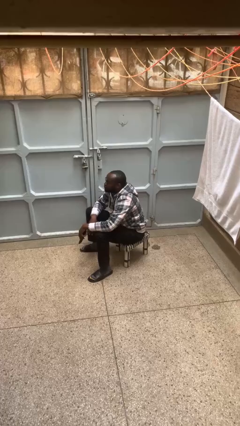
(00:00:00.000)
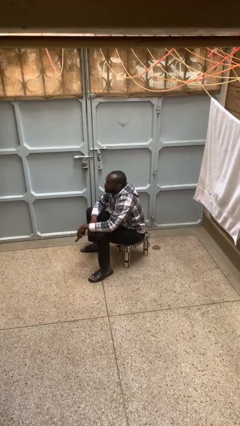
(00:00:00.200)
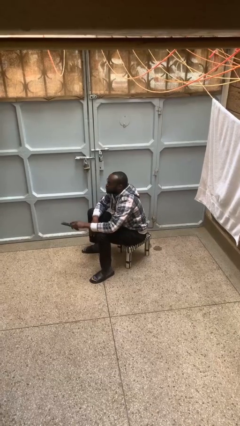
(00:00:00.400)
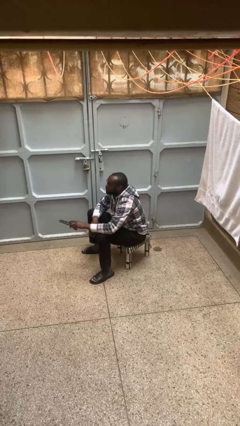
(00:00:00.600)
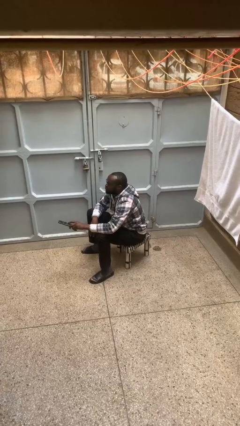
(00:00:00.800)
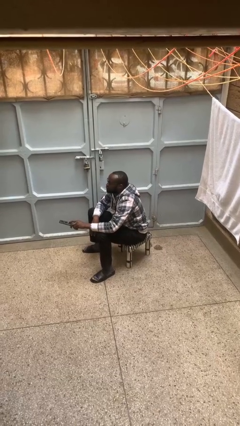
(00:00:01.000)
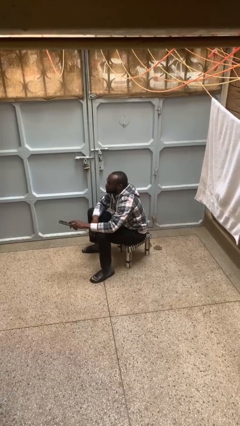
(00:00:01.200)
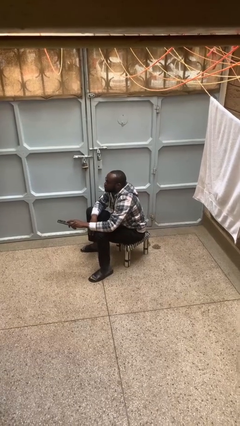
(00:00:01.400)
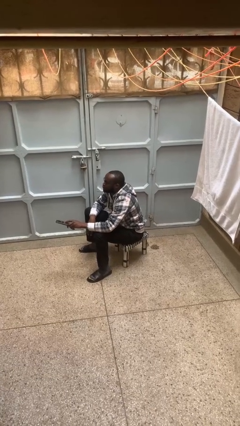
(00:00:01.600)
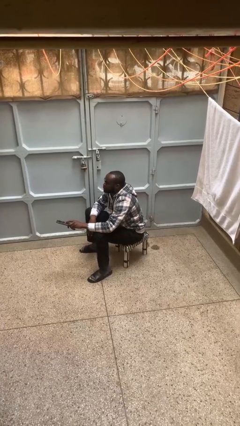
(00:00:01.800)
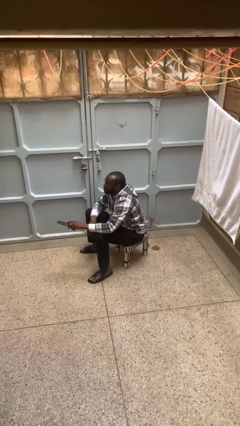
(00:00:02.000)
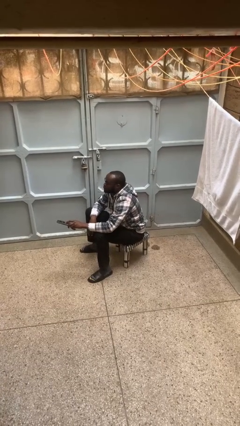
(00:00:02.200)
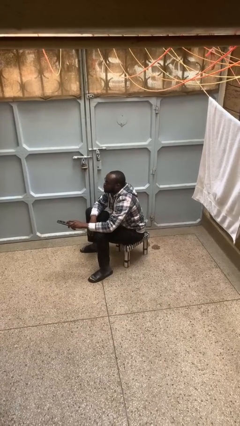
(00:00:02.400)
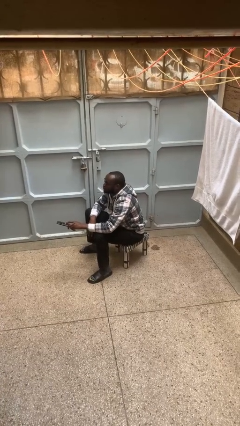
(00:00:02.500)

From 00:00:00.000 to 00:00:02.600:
person uses television remote

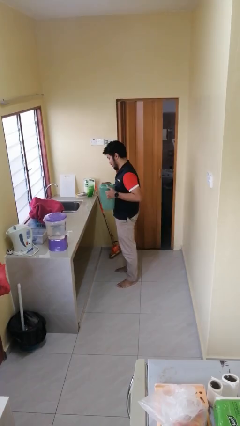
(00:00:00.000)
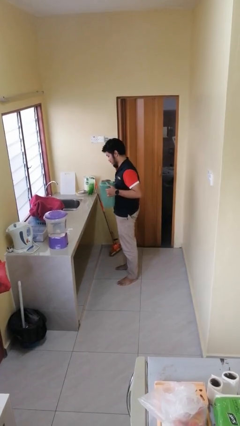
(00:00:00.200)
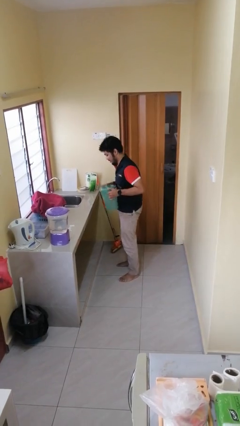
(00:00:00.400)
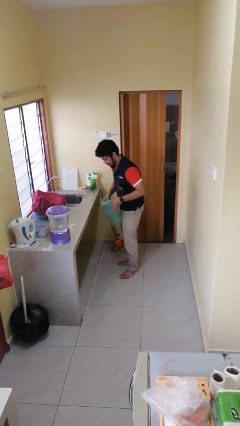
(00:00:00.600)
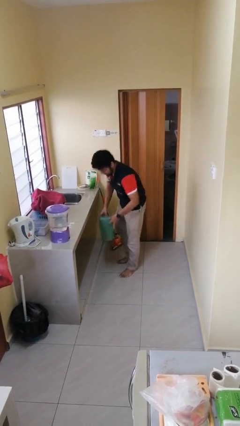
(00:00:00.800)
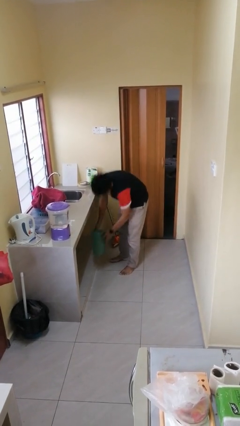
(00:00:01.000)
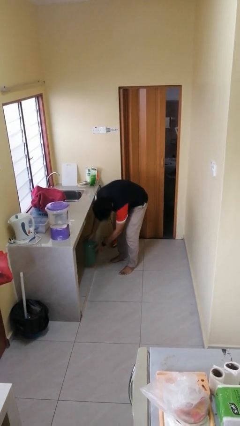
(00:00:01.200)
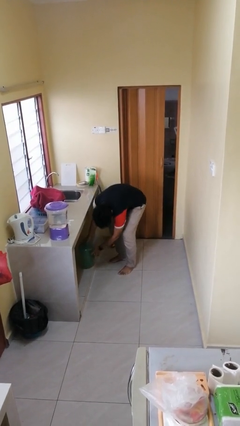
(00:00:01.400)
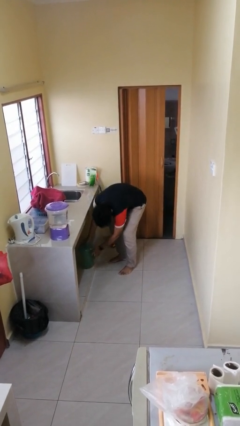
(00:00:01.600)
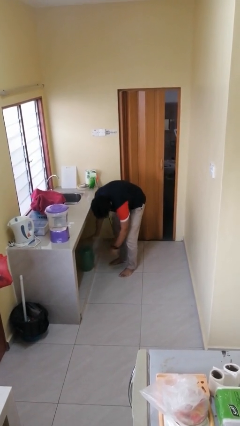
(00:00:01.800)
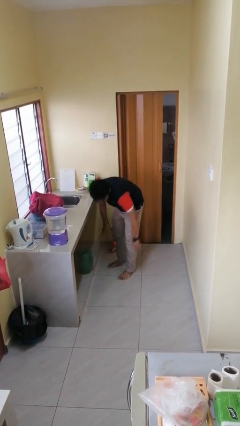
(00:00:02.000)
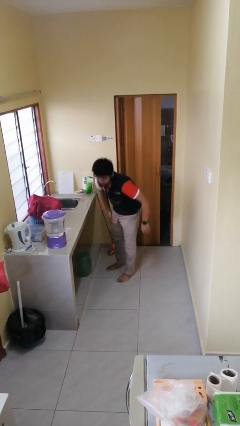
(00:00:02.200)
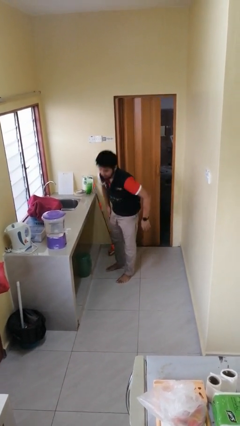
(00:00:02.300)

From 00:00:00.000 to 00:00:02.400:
person puts down object into cabinet

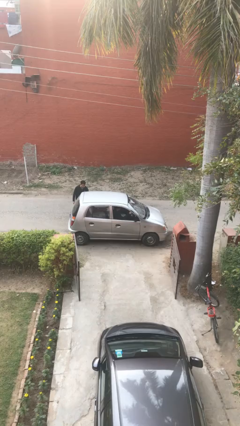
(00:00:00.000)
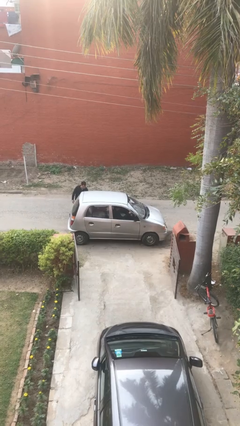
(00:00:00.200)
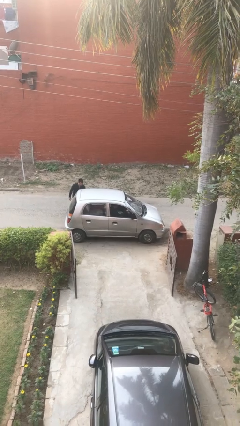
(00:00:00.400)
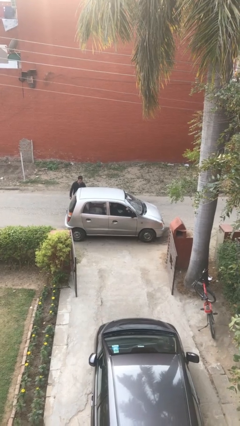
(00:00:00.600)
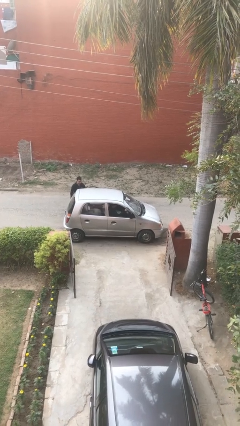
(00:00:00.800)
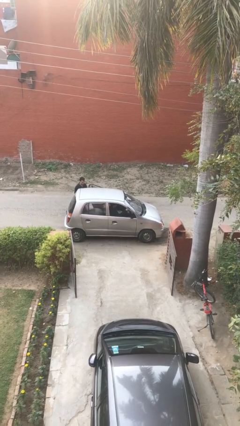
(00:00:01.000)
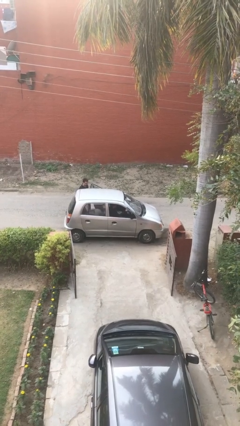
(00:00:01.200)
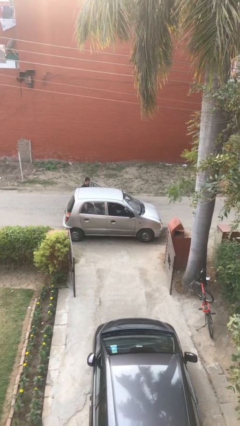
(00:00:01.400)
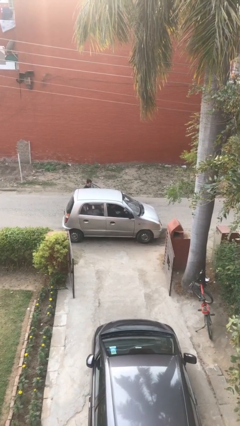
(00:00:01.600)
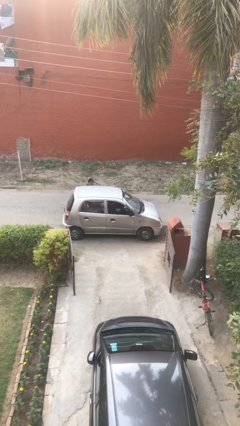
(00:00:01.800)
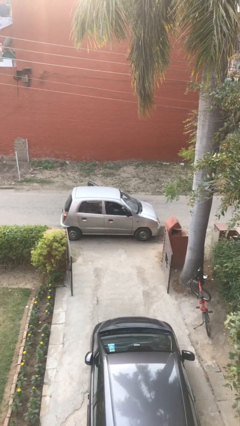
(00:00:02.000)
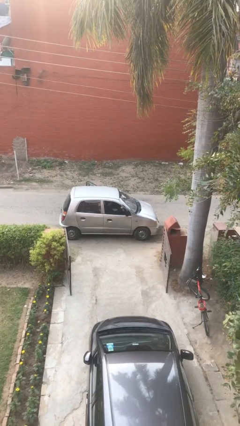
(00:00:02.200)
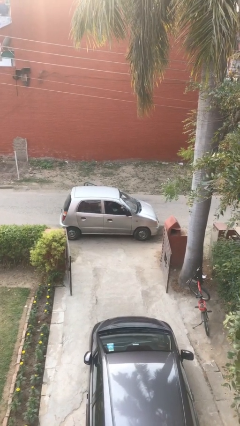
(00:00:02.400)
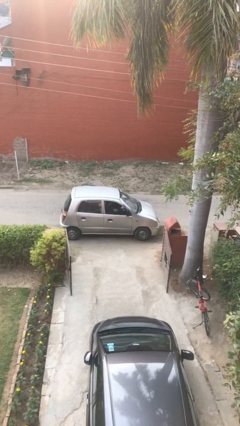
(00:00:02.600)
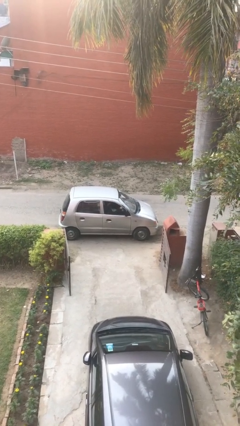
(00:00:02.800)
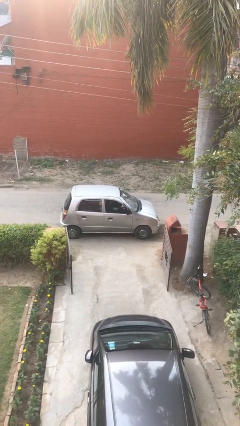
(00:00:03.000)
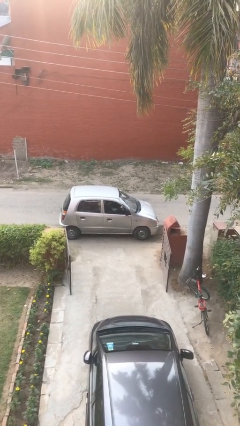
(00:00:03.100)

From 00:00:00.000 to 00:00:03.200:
car picks up person

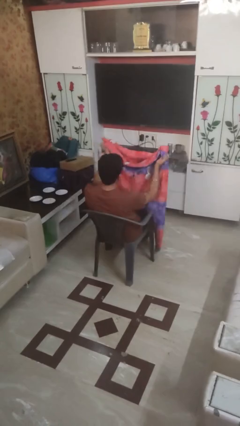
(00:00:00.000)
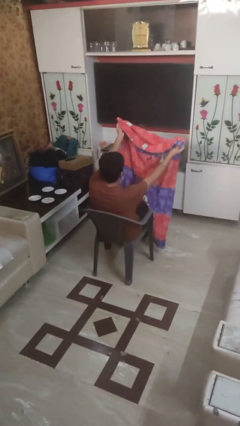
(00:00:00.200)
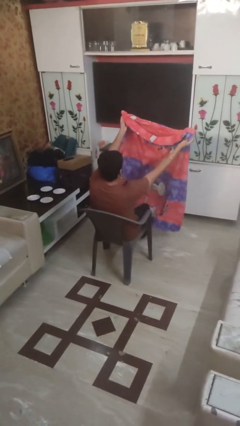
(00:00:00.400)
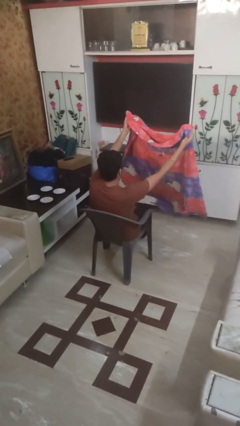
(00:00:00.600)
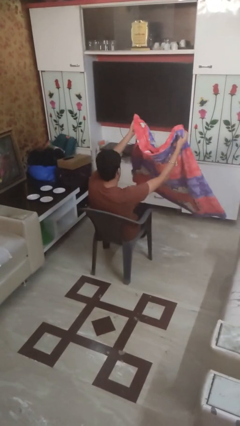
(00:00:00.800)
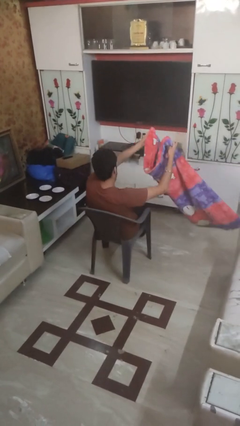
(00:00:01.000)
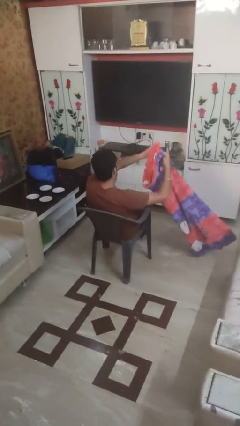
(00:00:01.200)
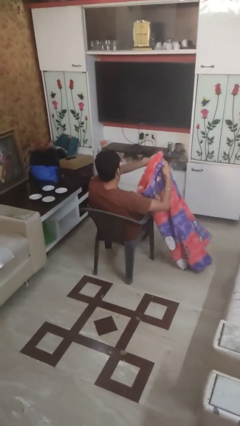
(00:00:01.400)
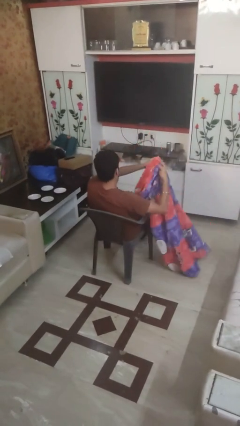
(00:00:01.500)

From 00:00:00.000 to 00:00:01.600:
person uncovers with blanket

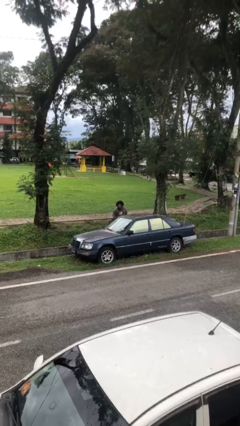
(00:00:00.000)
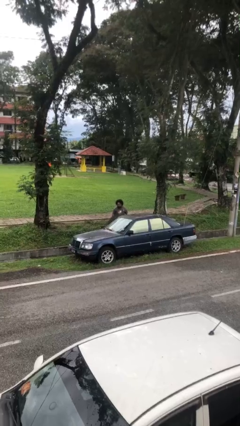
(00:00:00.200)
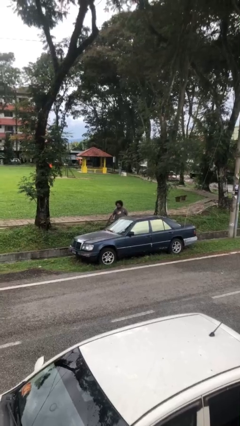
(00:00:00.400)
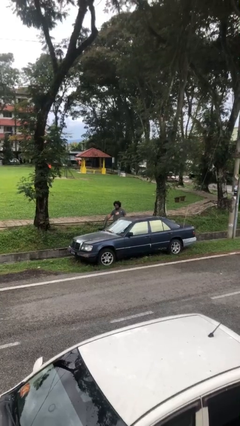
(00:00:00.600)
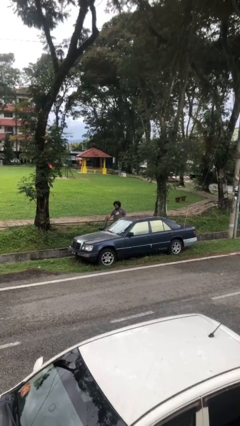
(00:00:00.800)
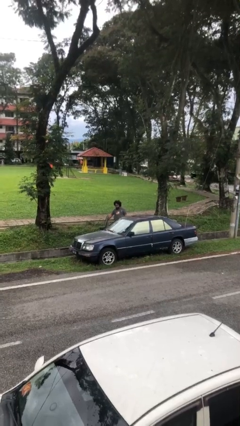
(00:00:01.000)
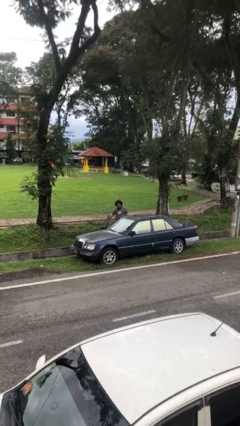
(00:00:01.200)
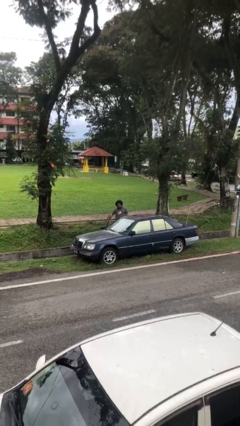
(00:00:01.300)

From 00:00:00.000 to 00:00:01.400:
person opens car door

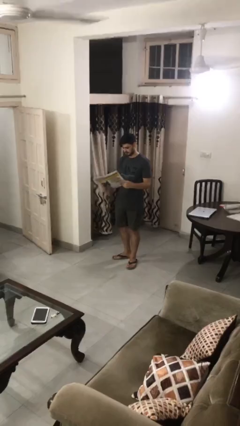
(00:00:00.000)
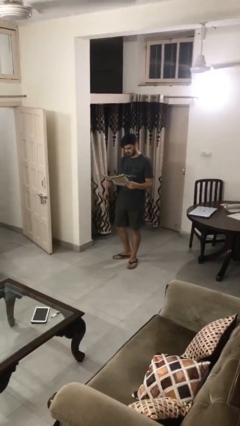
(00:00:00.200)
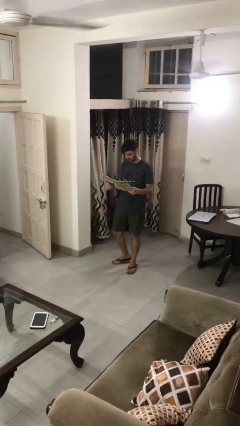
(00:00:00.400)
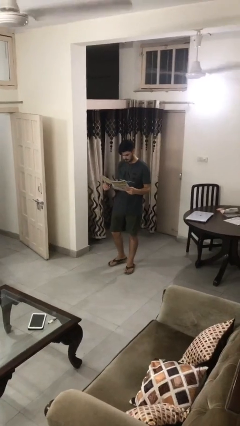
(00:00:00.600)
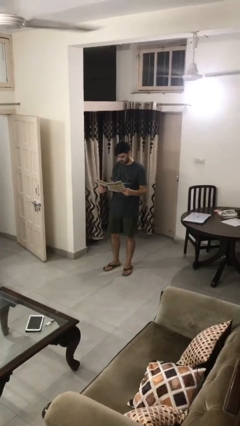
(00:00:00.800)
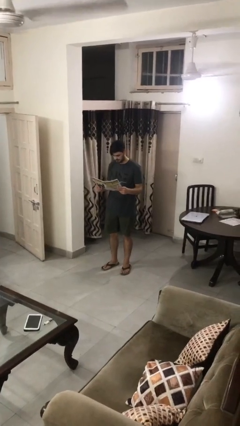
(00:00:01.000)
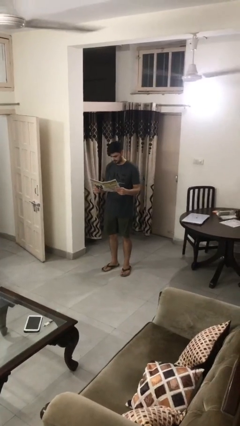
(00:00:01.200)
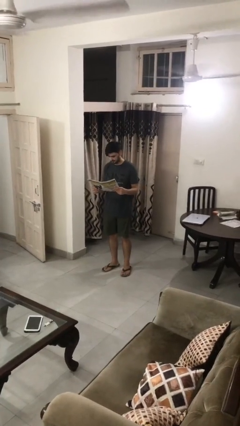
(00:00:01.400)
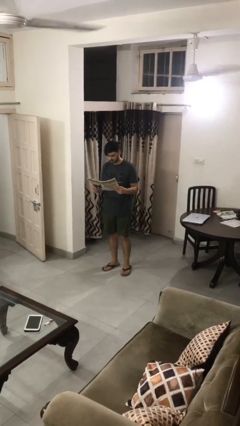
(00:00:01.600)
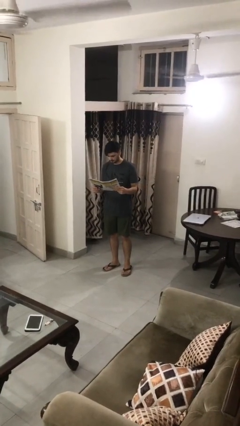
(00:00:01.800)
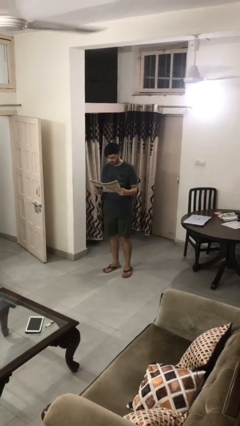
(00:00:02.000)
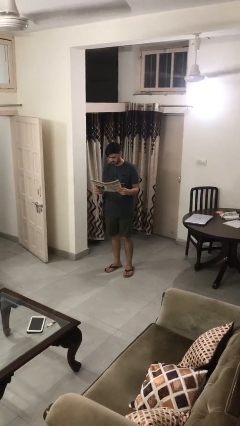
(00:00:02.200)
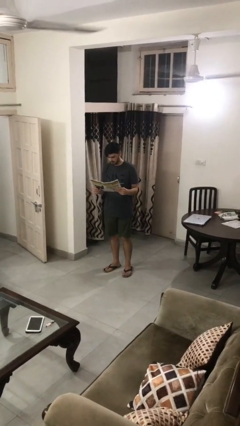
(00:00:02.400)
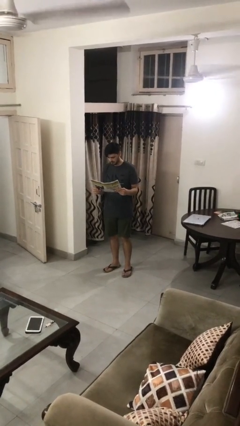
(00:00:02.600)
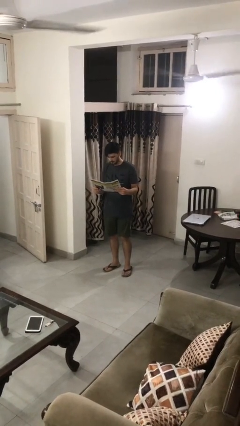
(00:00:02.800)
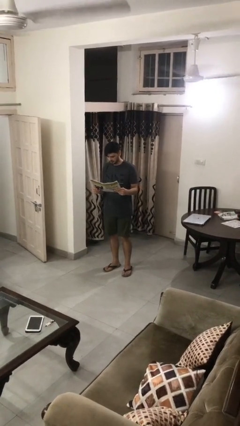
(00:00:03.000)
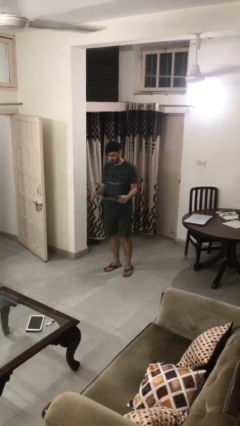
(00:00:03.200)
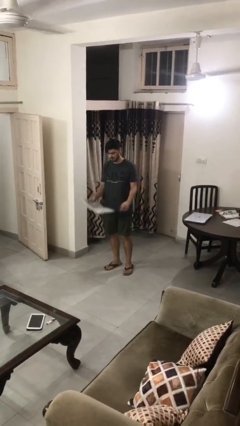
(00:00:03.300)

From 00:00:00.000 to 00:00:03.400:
person reads newspaper

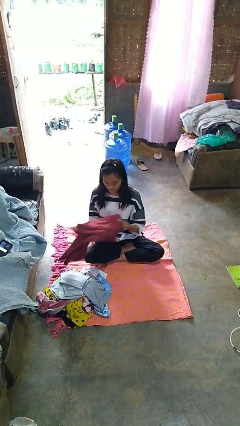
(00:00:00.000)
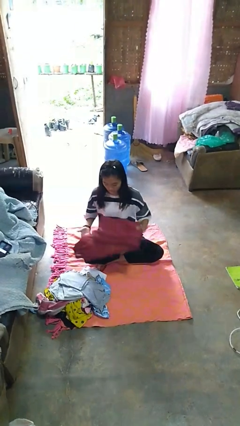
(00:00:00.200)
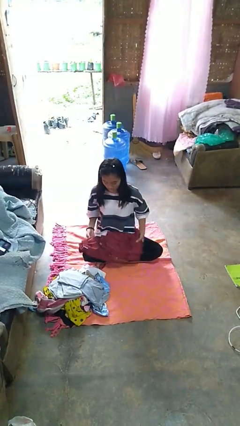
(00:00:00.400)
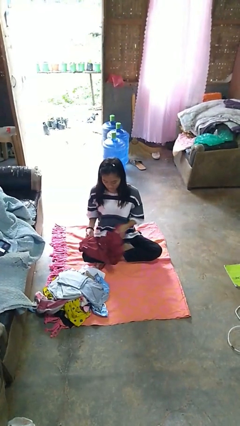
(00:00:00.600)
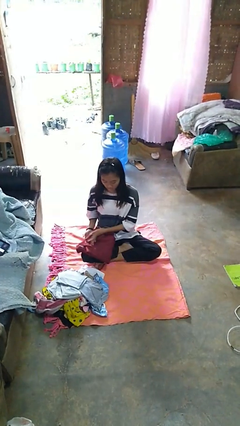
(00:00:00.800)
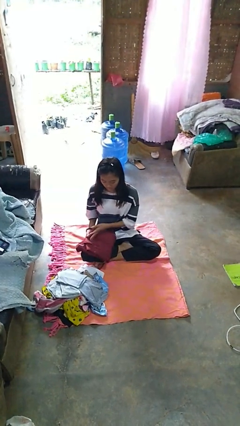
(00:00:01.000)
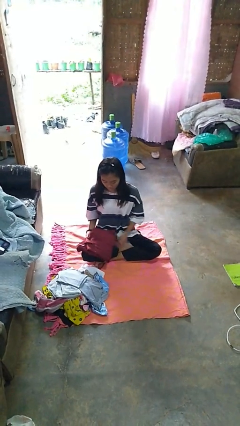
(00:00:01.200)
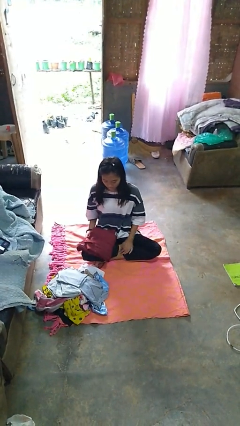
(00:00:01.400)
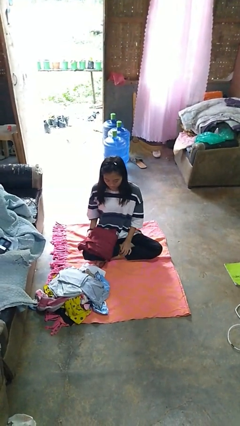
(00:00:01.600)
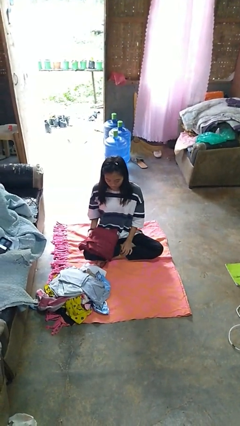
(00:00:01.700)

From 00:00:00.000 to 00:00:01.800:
person folds pants

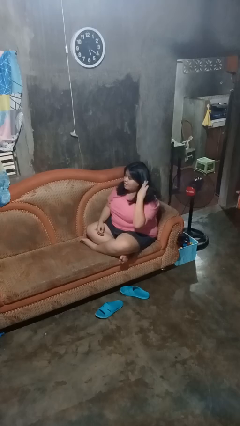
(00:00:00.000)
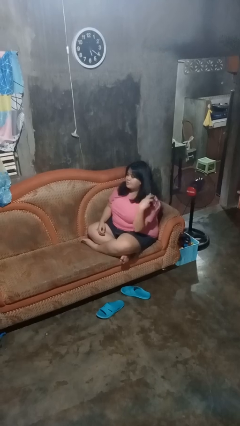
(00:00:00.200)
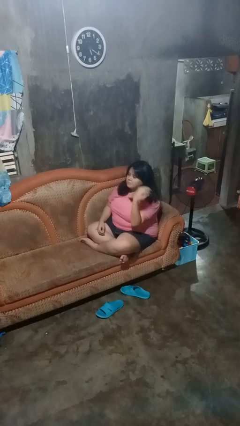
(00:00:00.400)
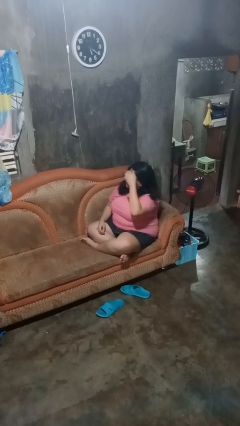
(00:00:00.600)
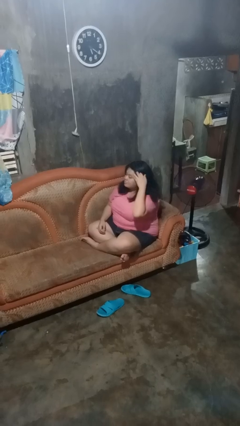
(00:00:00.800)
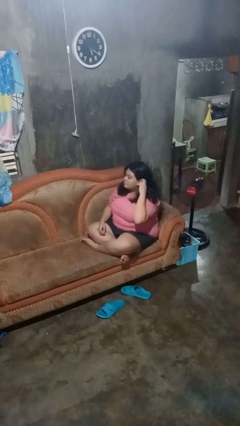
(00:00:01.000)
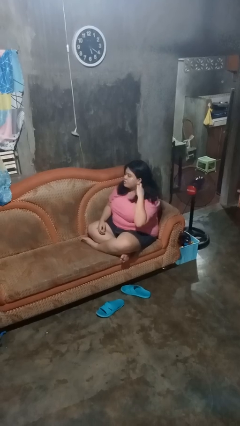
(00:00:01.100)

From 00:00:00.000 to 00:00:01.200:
person strokes hair
